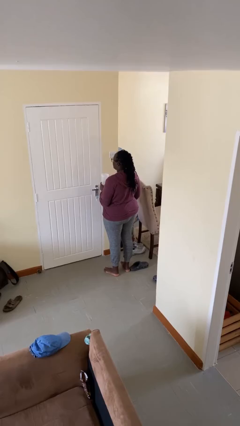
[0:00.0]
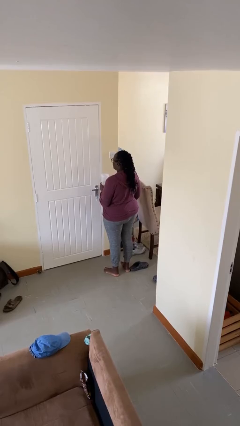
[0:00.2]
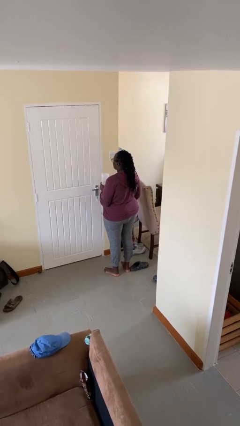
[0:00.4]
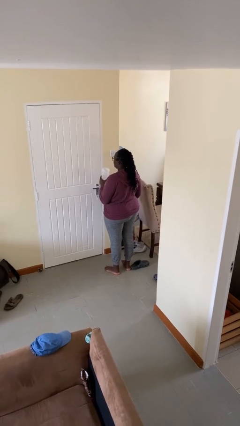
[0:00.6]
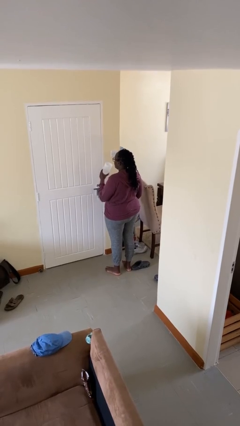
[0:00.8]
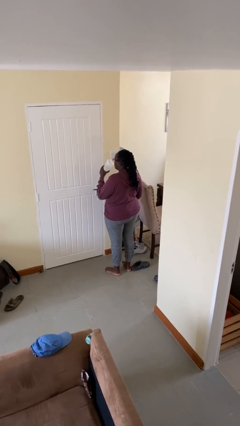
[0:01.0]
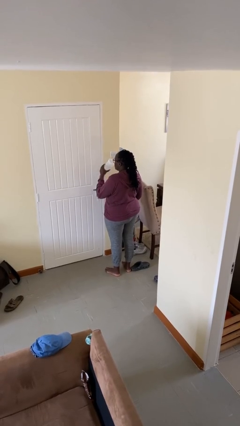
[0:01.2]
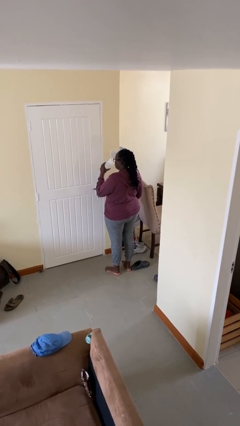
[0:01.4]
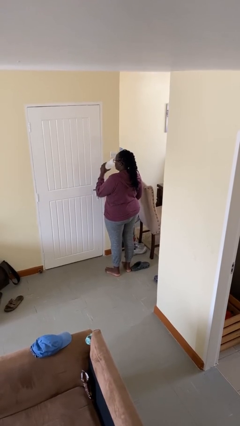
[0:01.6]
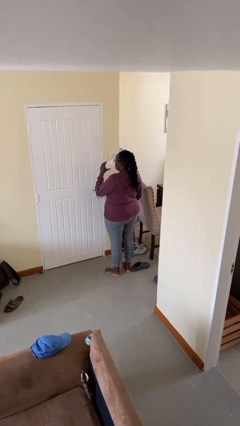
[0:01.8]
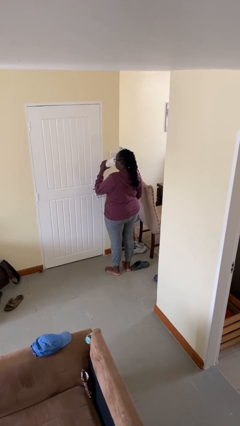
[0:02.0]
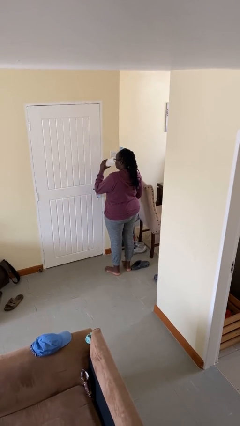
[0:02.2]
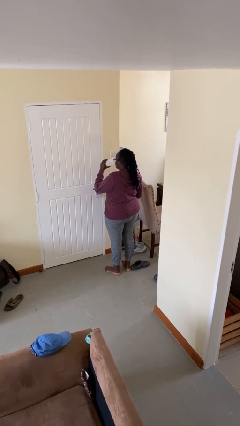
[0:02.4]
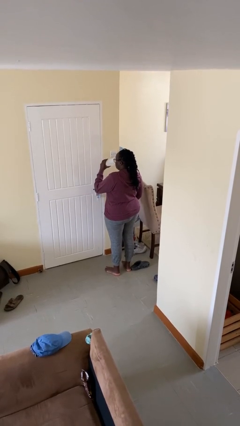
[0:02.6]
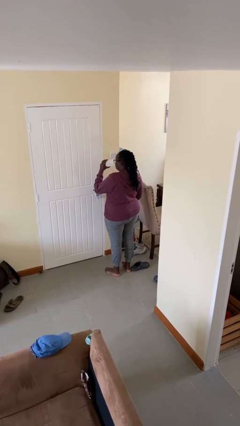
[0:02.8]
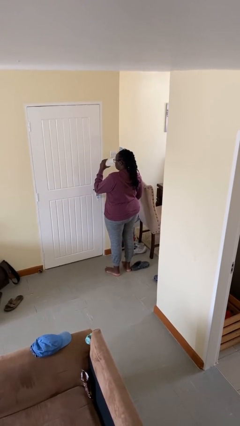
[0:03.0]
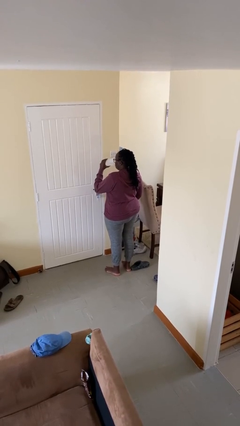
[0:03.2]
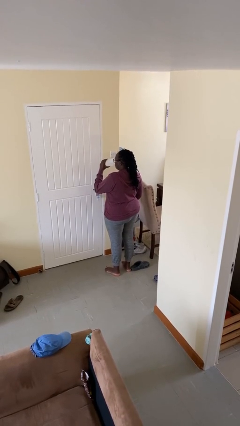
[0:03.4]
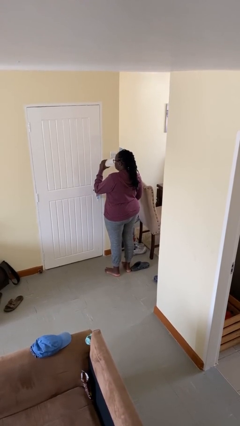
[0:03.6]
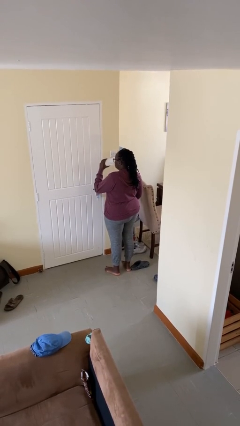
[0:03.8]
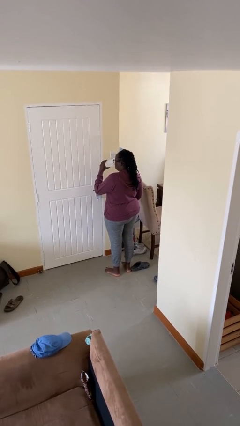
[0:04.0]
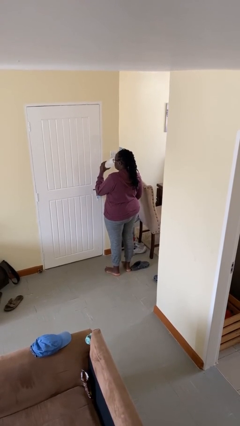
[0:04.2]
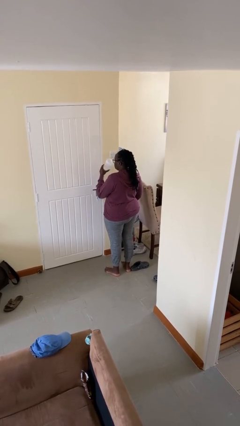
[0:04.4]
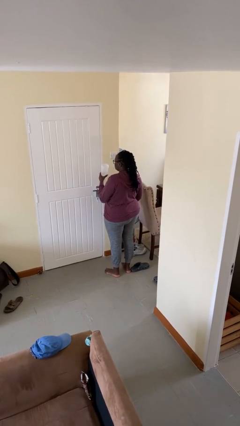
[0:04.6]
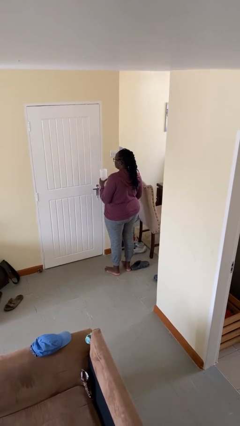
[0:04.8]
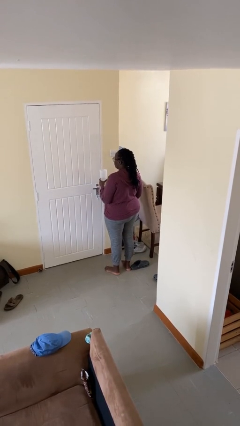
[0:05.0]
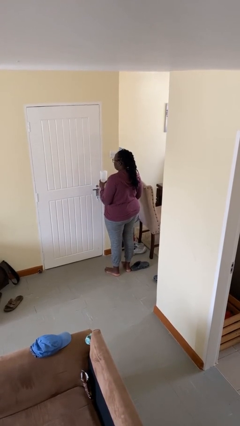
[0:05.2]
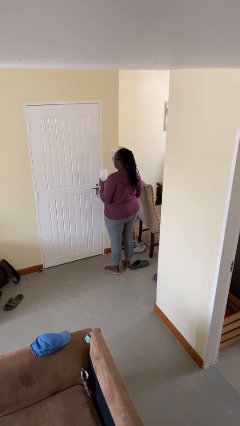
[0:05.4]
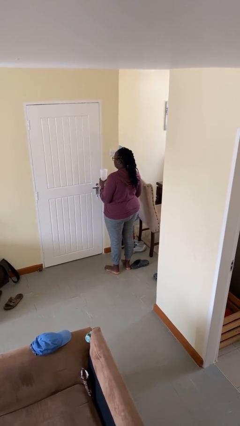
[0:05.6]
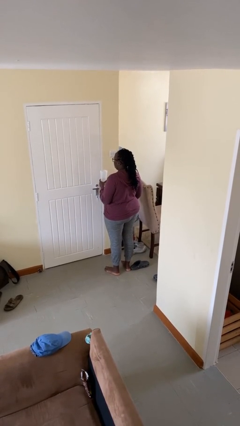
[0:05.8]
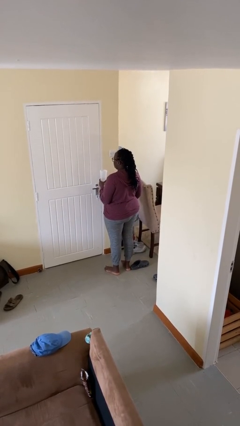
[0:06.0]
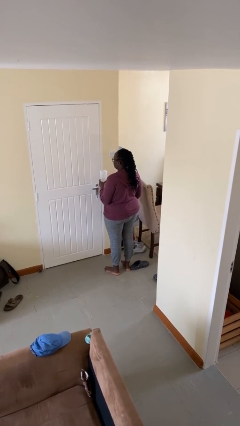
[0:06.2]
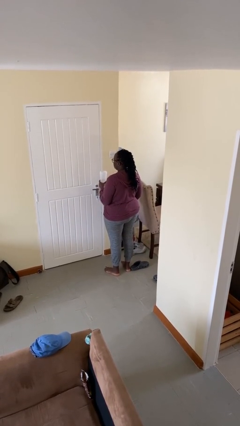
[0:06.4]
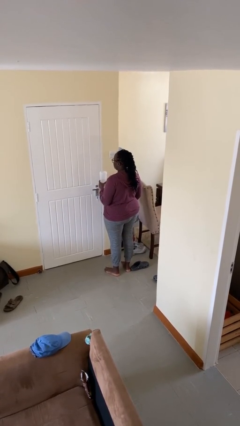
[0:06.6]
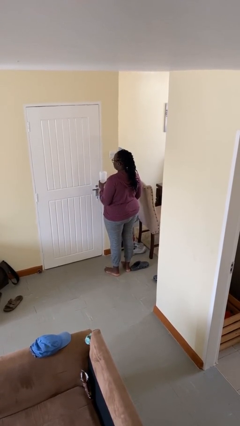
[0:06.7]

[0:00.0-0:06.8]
person drinks from bottle

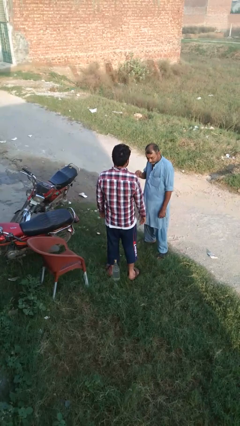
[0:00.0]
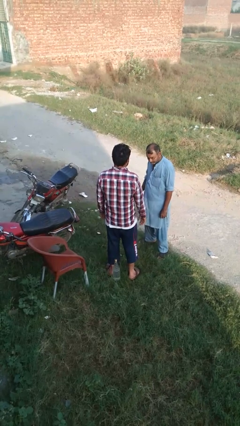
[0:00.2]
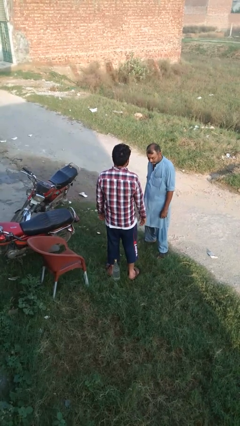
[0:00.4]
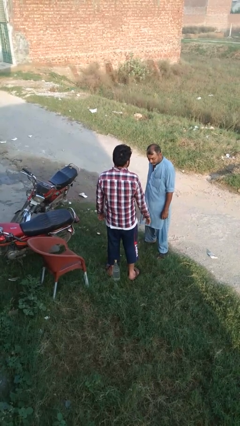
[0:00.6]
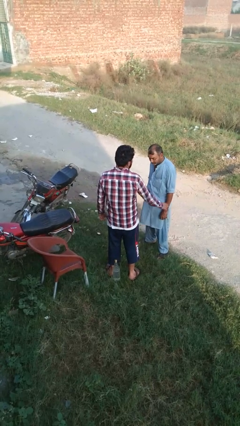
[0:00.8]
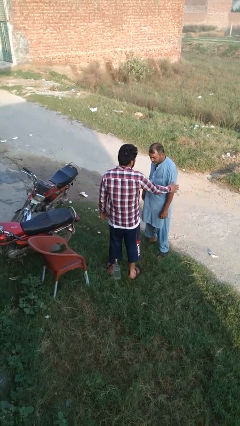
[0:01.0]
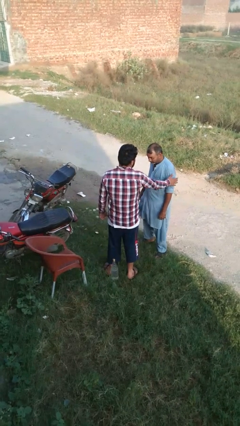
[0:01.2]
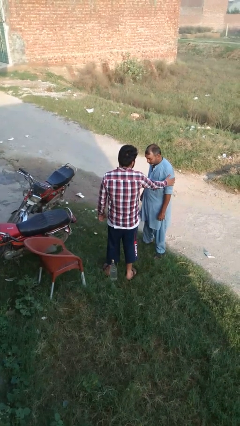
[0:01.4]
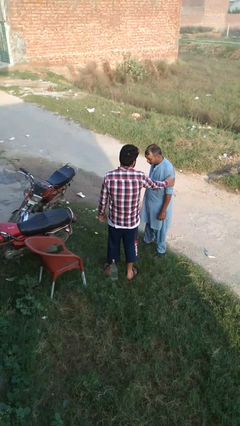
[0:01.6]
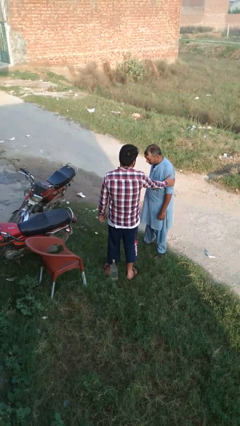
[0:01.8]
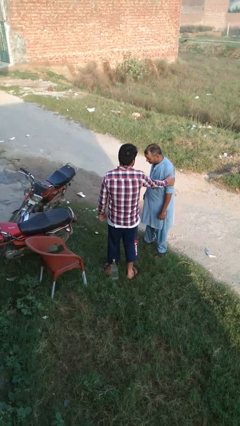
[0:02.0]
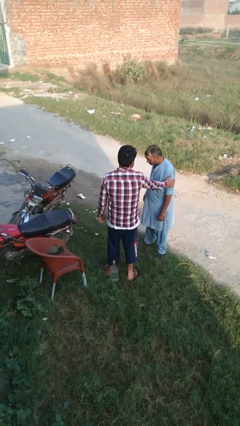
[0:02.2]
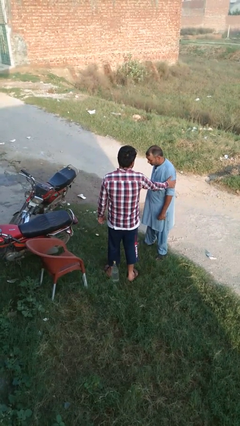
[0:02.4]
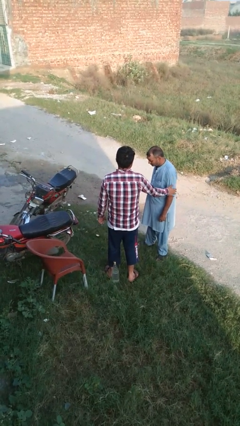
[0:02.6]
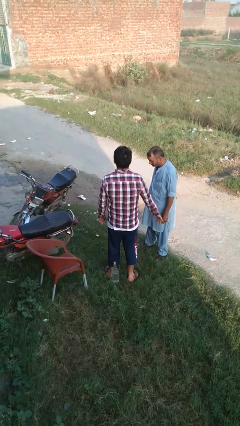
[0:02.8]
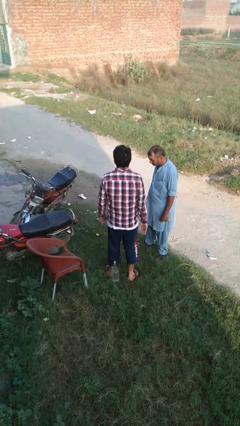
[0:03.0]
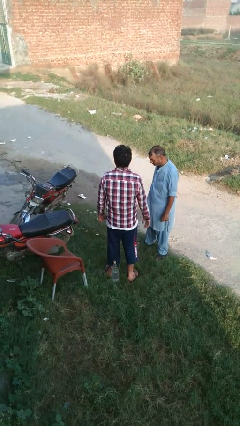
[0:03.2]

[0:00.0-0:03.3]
person grabs person by bicep

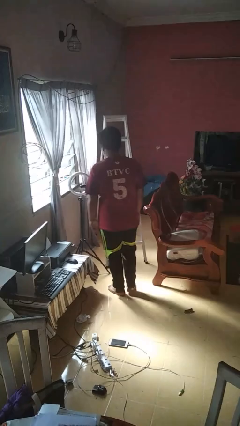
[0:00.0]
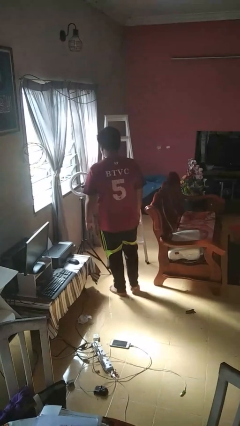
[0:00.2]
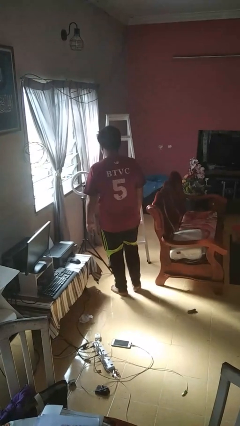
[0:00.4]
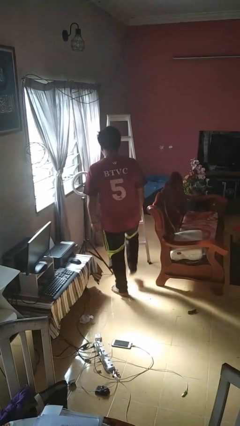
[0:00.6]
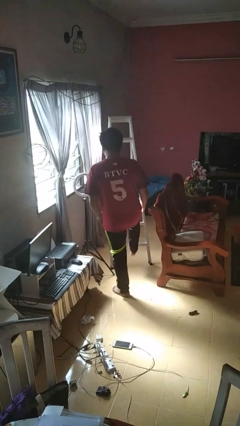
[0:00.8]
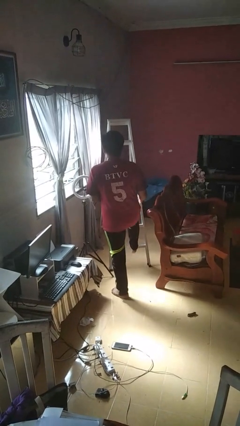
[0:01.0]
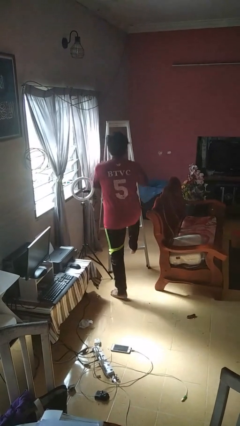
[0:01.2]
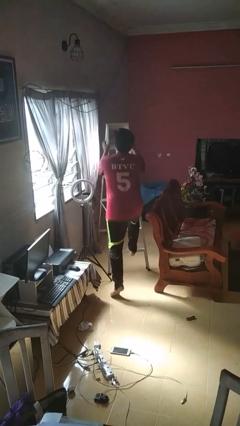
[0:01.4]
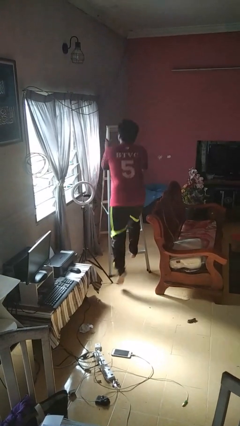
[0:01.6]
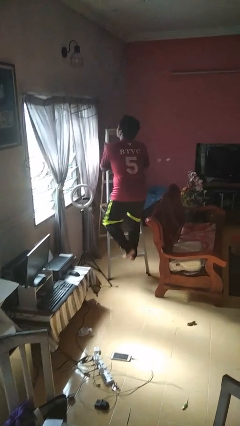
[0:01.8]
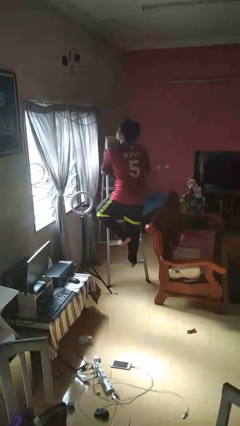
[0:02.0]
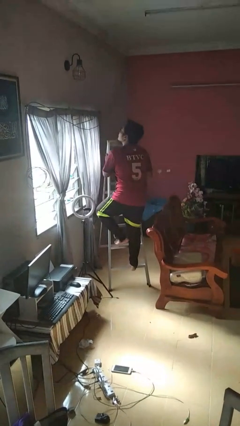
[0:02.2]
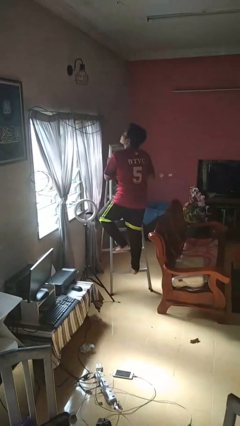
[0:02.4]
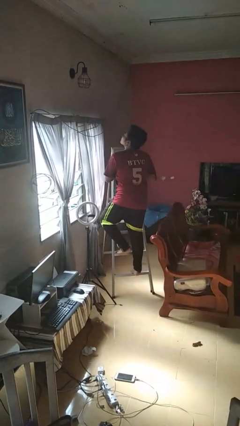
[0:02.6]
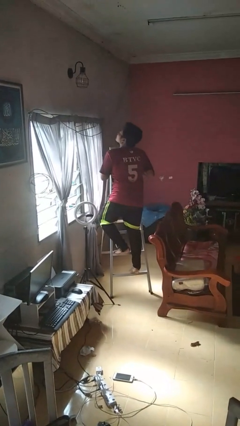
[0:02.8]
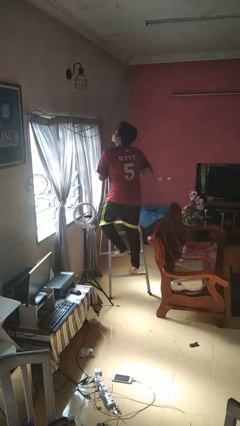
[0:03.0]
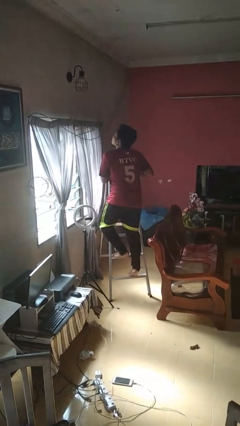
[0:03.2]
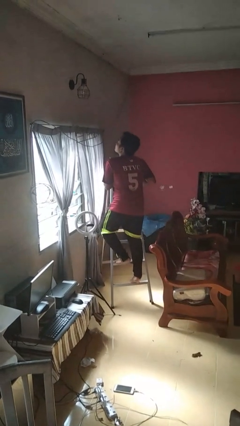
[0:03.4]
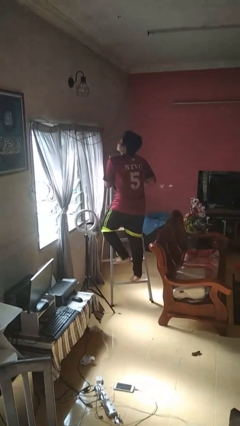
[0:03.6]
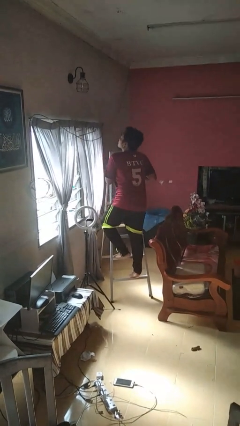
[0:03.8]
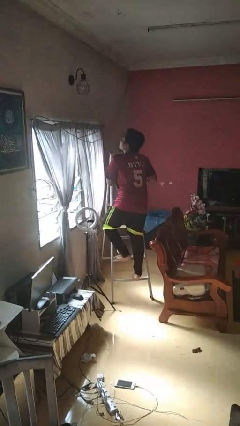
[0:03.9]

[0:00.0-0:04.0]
person climbs up ladder

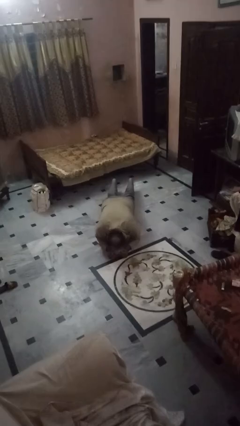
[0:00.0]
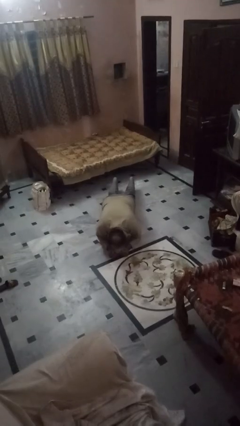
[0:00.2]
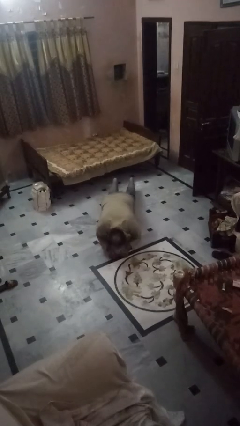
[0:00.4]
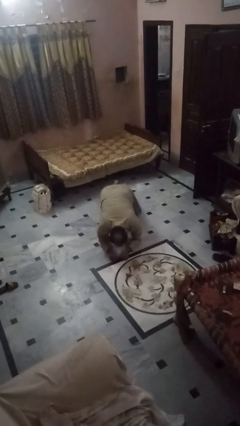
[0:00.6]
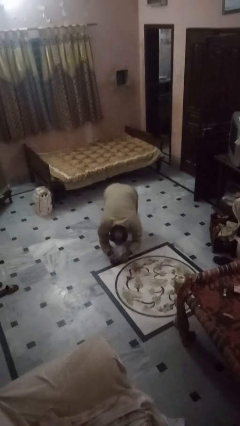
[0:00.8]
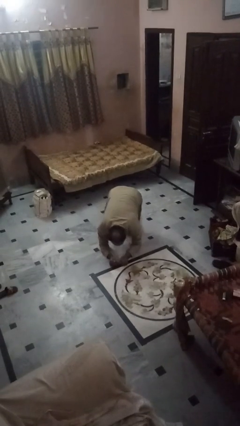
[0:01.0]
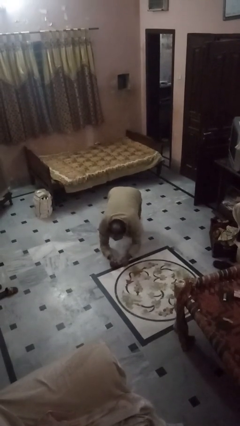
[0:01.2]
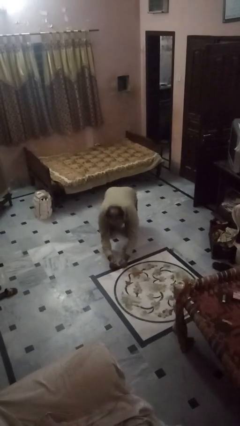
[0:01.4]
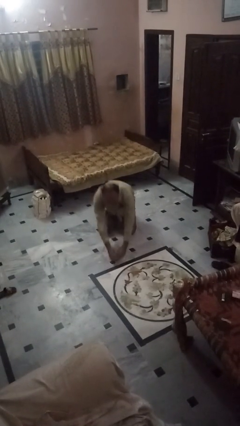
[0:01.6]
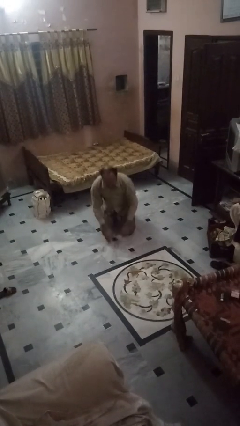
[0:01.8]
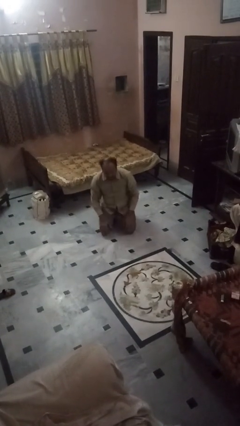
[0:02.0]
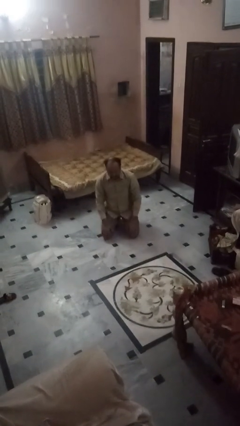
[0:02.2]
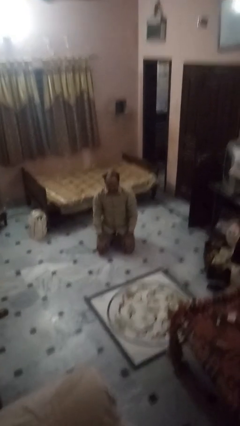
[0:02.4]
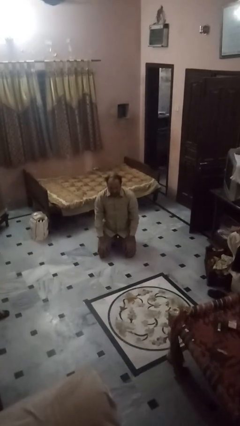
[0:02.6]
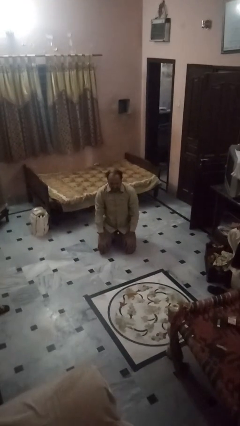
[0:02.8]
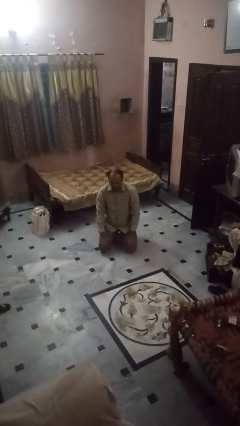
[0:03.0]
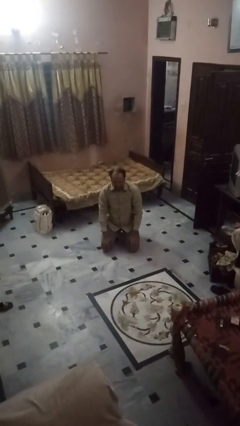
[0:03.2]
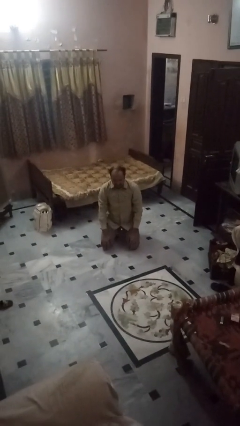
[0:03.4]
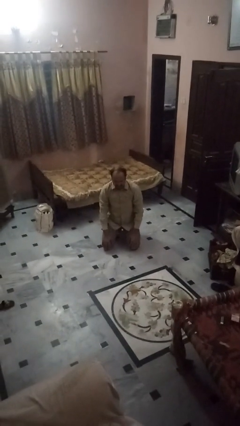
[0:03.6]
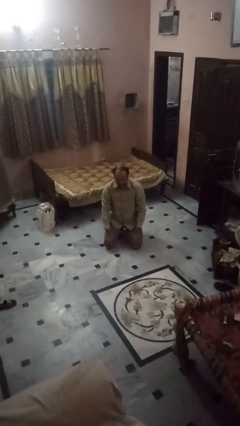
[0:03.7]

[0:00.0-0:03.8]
person stands up from floor

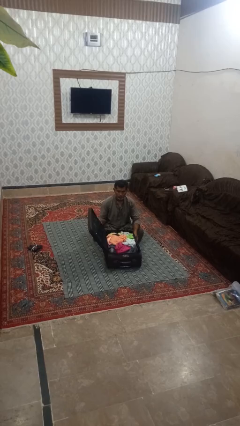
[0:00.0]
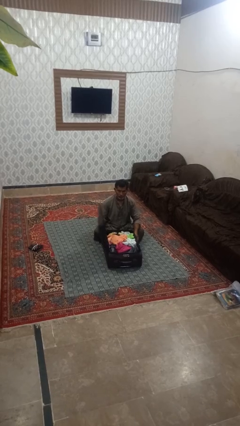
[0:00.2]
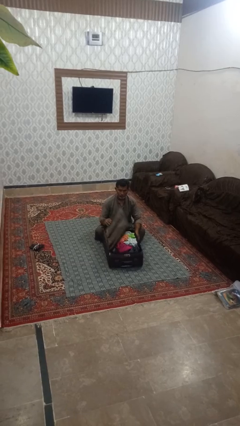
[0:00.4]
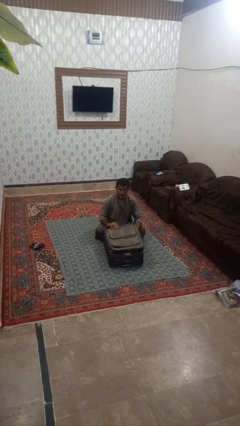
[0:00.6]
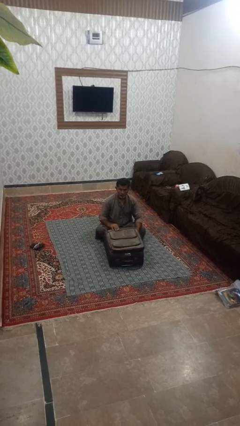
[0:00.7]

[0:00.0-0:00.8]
person closes suitcase
